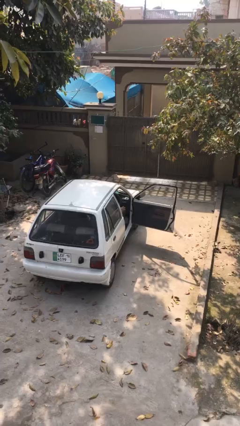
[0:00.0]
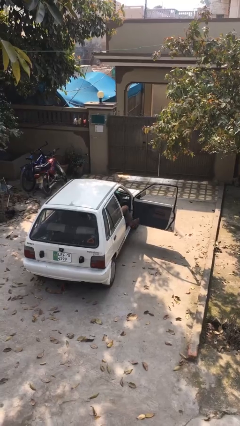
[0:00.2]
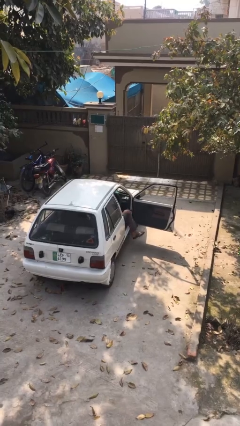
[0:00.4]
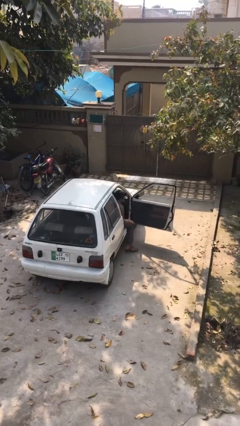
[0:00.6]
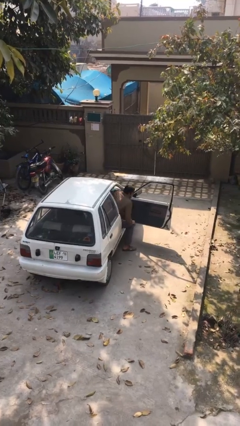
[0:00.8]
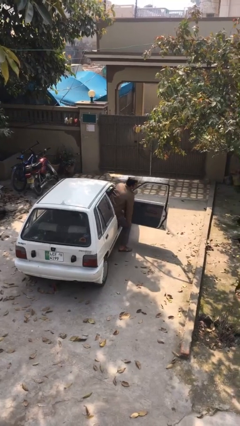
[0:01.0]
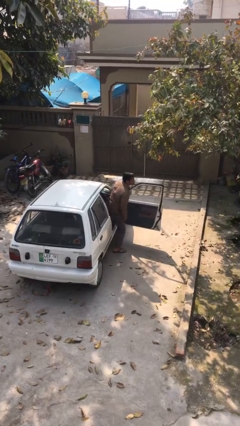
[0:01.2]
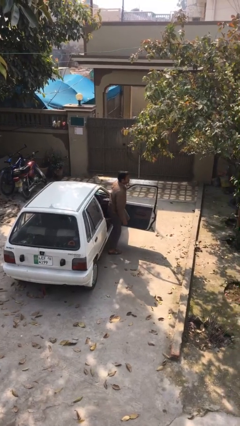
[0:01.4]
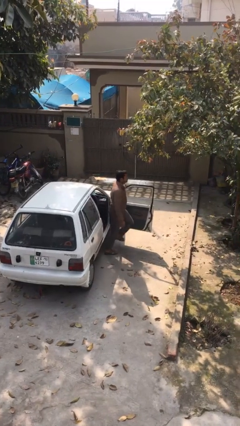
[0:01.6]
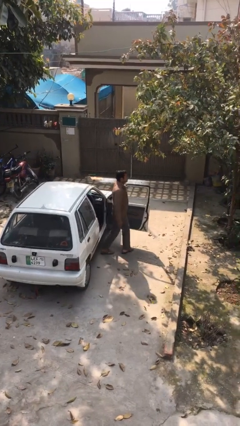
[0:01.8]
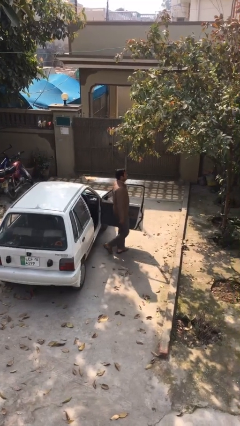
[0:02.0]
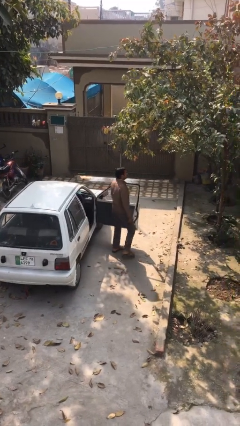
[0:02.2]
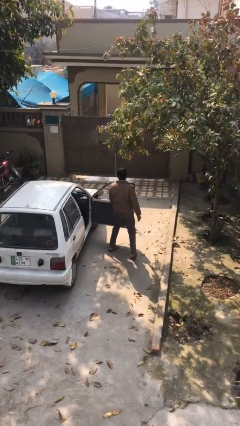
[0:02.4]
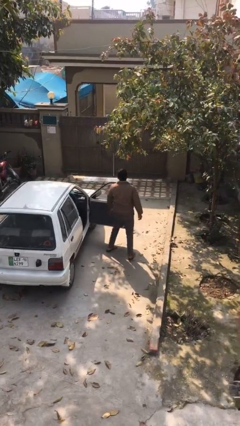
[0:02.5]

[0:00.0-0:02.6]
person exits car

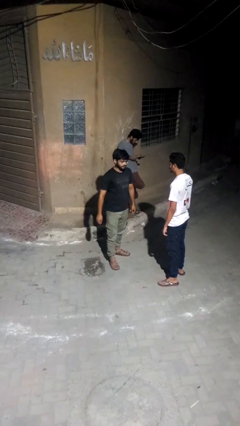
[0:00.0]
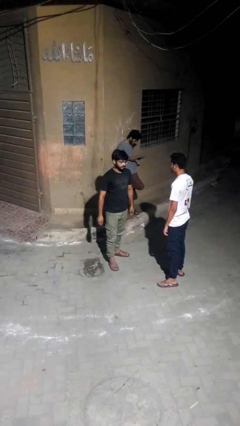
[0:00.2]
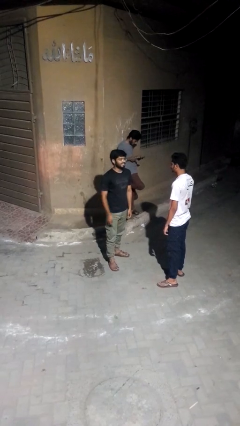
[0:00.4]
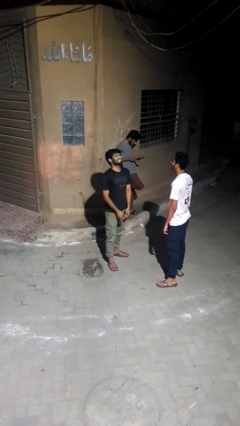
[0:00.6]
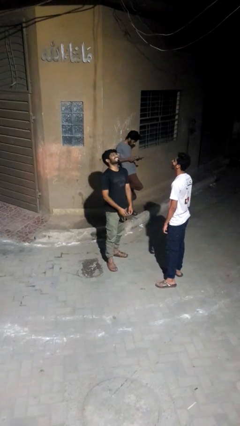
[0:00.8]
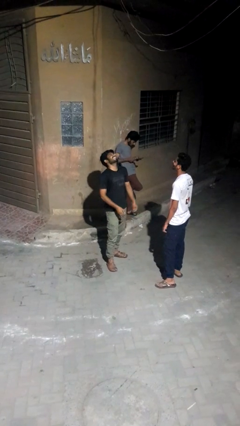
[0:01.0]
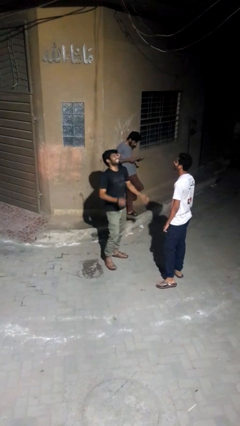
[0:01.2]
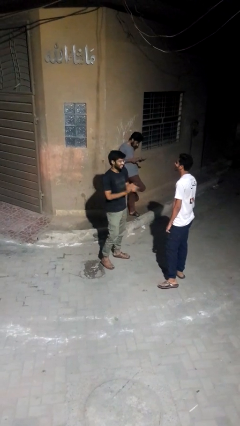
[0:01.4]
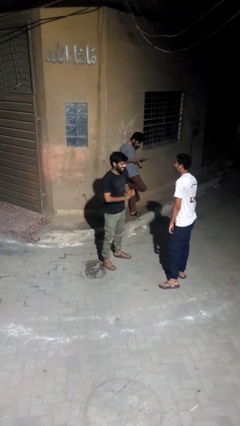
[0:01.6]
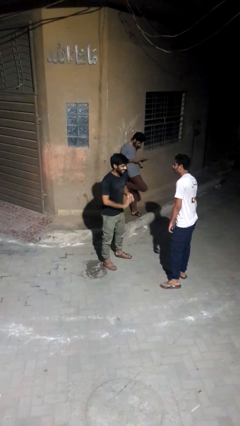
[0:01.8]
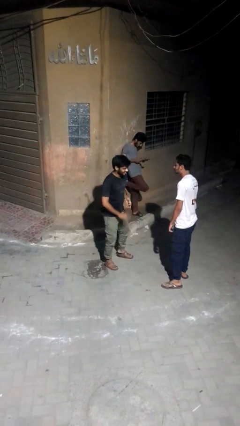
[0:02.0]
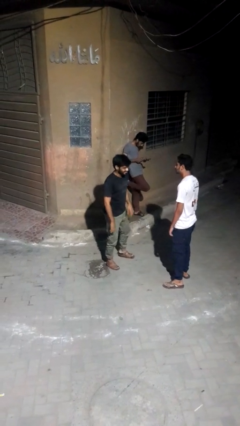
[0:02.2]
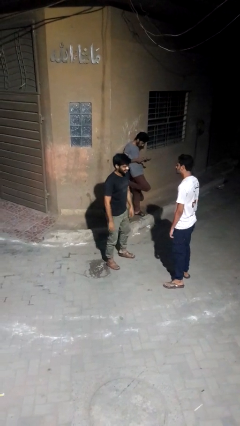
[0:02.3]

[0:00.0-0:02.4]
person laughs with person

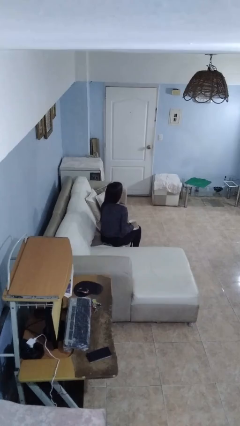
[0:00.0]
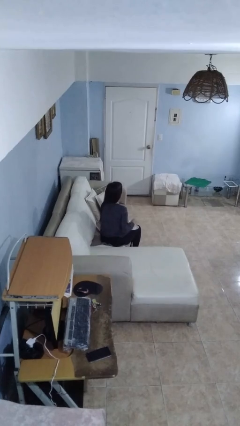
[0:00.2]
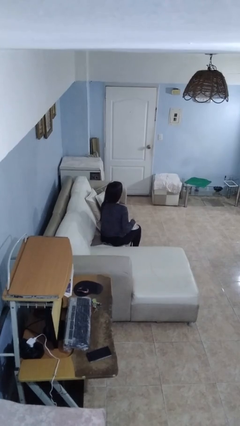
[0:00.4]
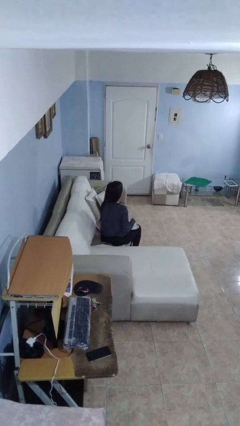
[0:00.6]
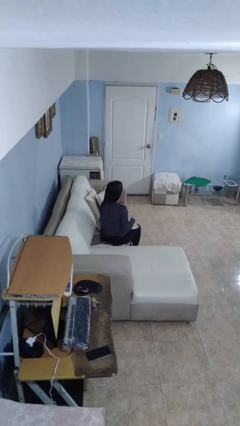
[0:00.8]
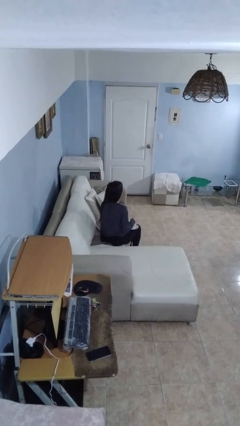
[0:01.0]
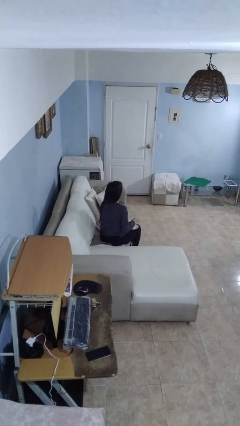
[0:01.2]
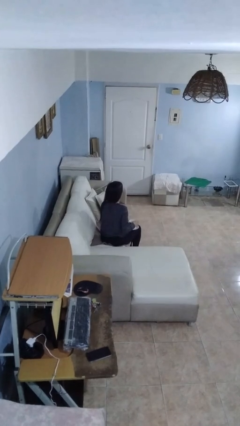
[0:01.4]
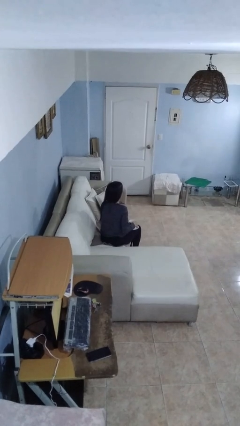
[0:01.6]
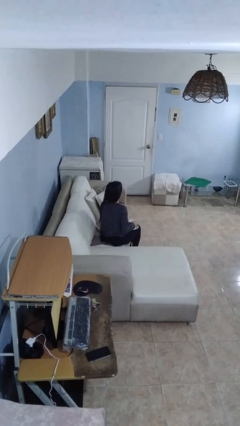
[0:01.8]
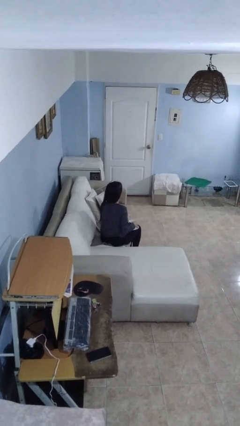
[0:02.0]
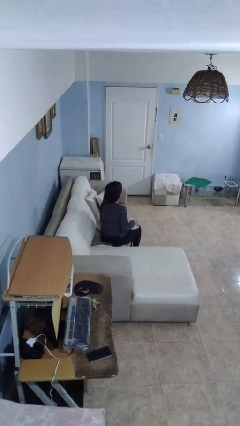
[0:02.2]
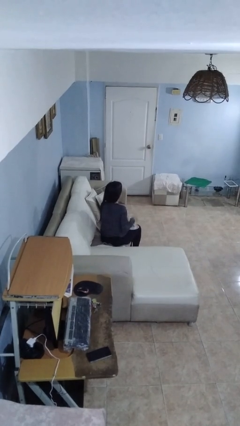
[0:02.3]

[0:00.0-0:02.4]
person stirs mug

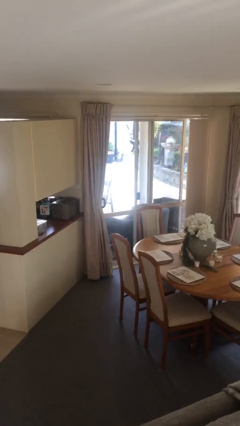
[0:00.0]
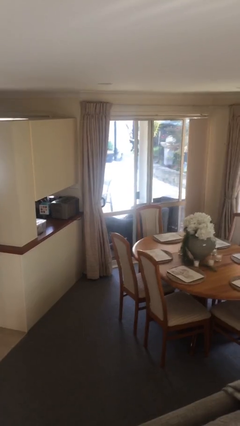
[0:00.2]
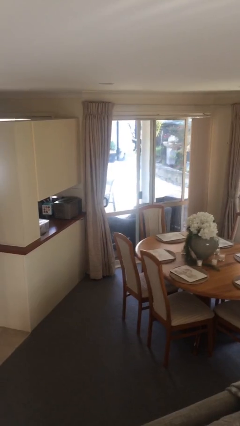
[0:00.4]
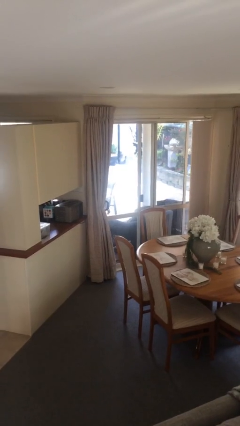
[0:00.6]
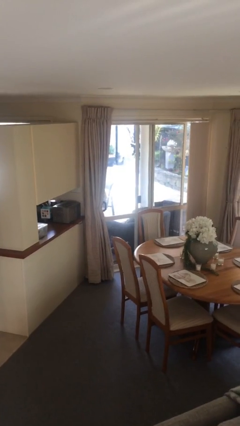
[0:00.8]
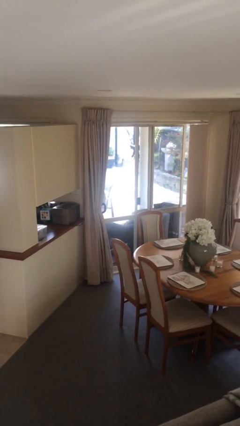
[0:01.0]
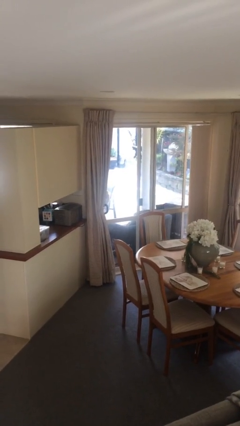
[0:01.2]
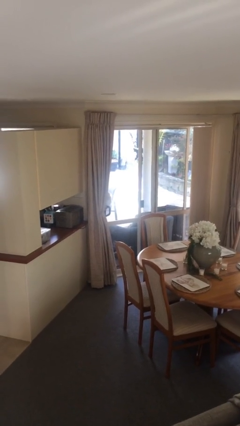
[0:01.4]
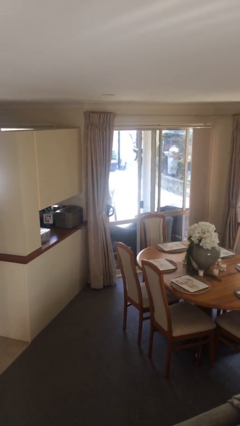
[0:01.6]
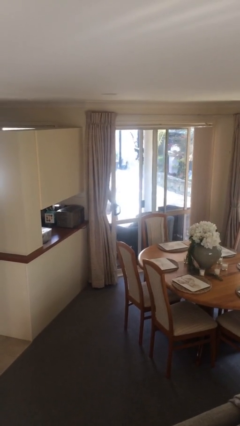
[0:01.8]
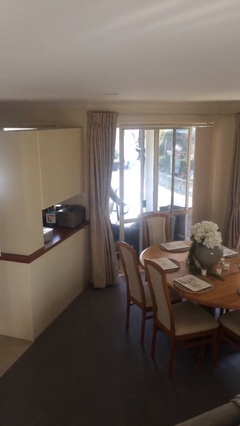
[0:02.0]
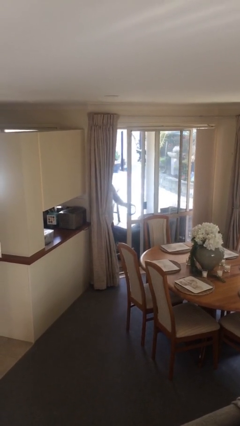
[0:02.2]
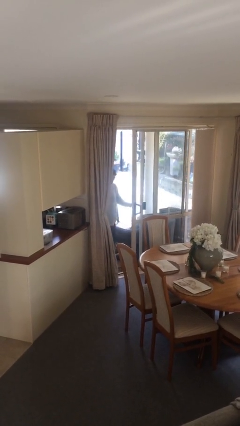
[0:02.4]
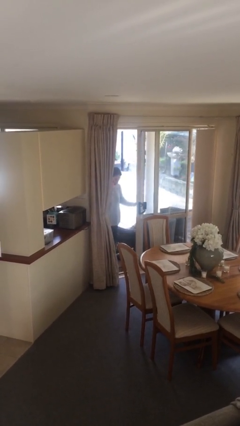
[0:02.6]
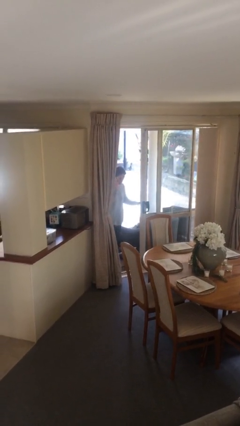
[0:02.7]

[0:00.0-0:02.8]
person opens facility door

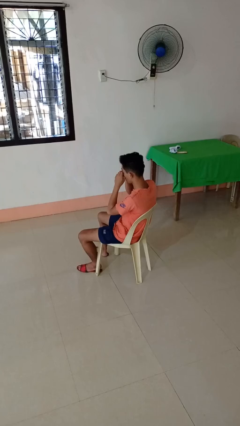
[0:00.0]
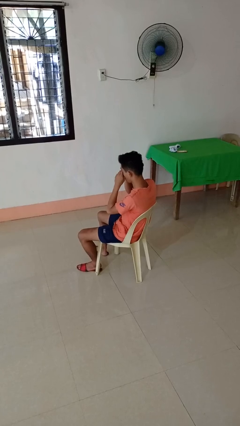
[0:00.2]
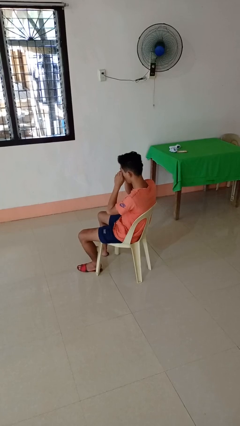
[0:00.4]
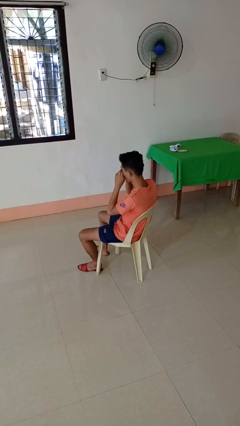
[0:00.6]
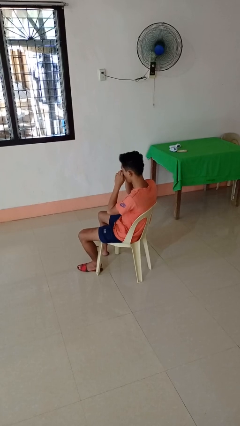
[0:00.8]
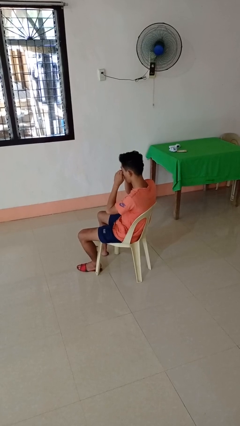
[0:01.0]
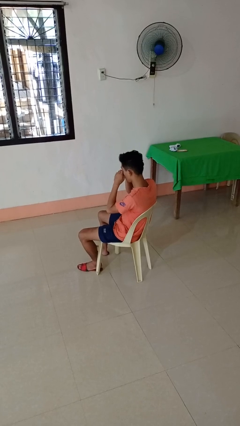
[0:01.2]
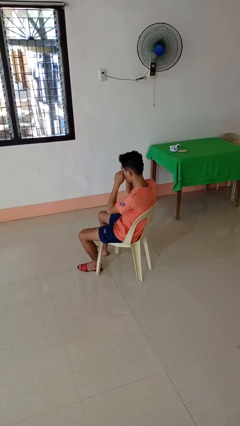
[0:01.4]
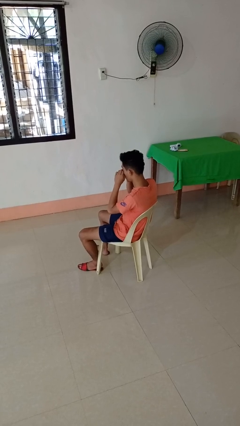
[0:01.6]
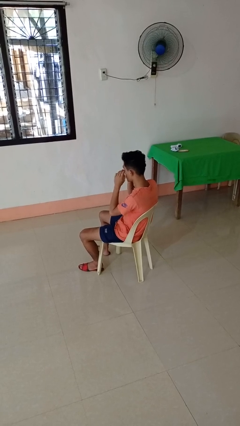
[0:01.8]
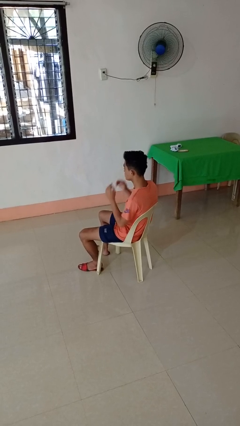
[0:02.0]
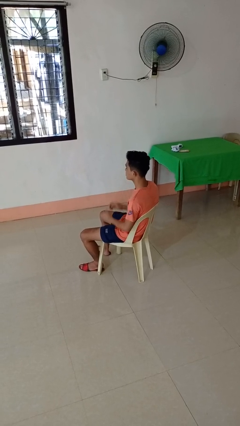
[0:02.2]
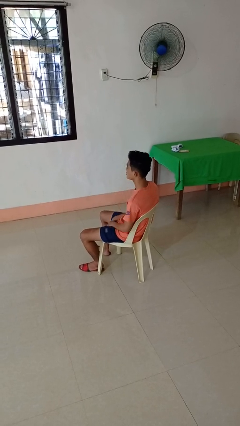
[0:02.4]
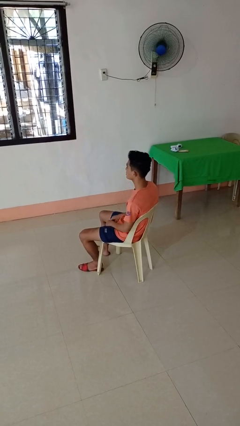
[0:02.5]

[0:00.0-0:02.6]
person rubs eyes

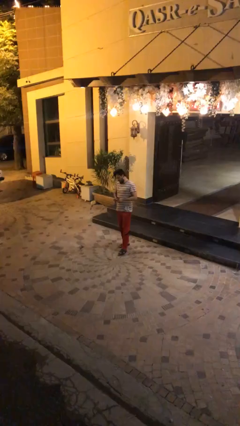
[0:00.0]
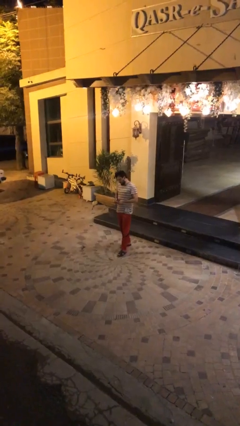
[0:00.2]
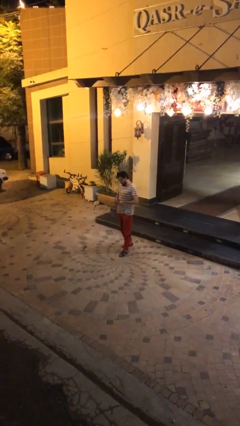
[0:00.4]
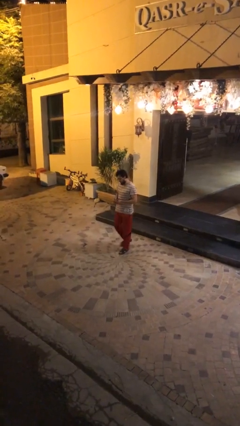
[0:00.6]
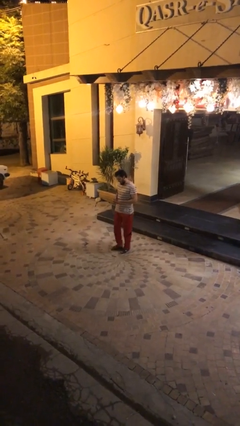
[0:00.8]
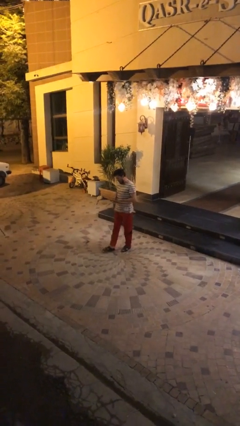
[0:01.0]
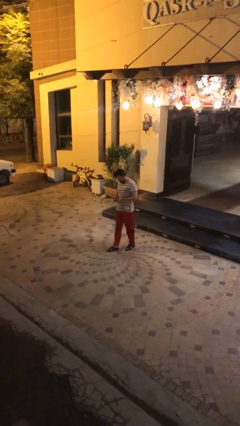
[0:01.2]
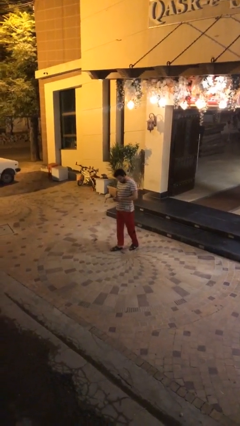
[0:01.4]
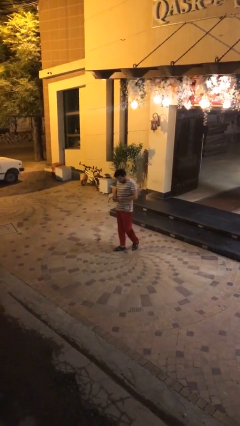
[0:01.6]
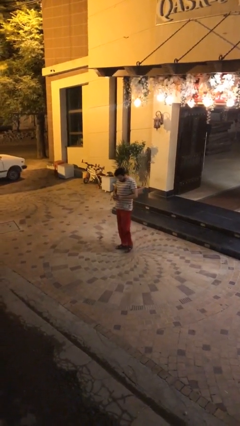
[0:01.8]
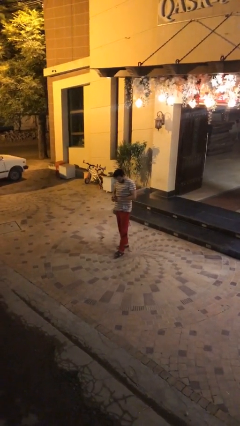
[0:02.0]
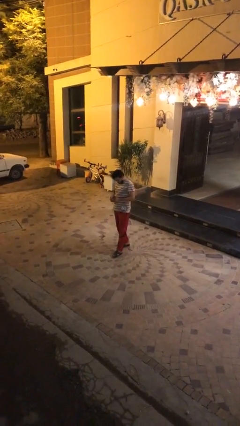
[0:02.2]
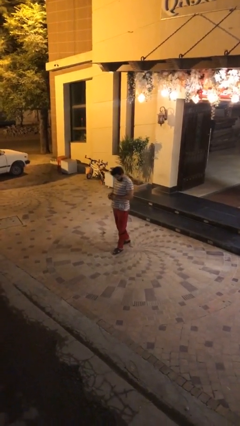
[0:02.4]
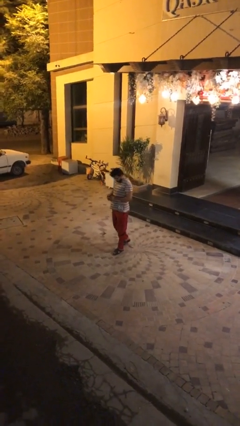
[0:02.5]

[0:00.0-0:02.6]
person texts on phone

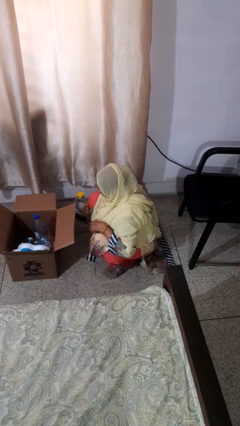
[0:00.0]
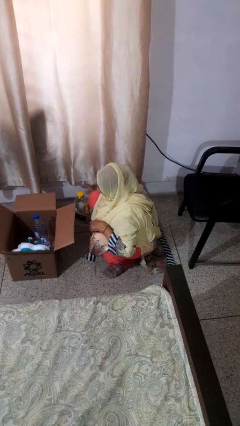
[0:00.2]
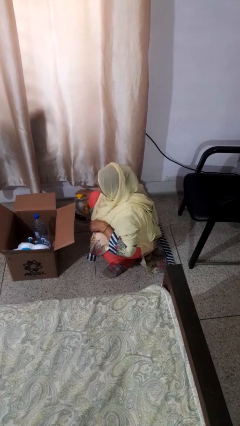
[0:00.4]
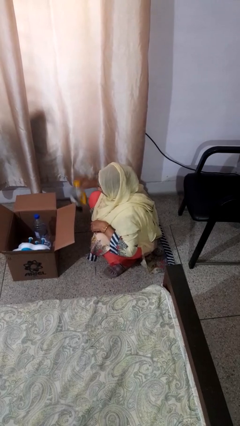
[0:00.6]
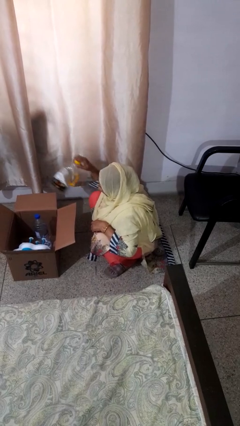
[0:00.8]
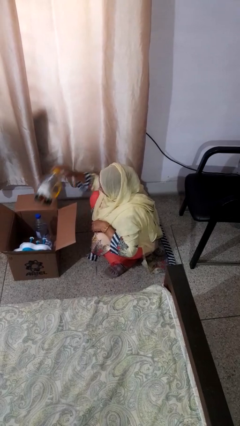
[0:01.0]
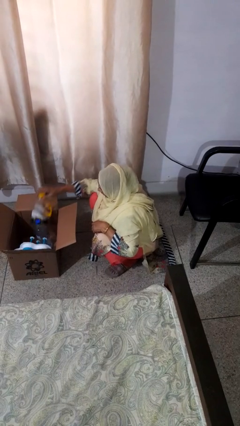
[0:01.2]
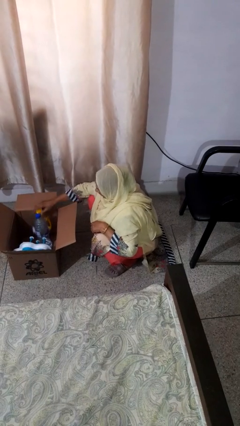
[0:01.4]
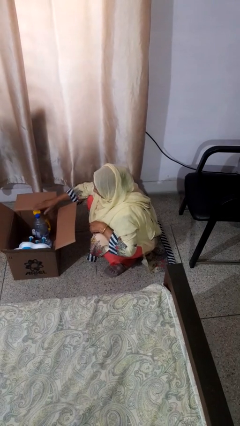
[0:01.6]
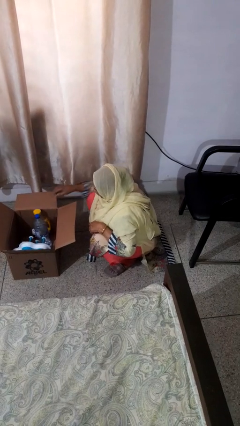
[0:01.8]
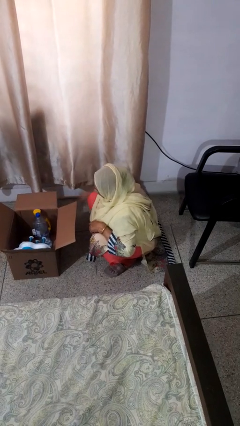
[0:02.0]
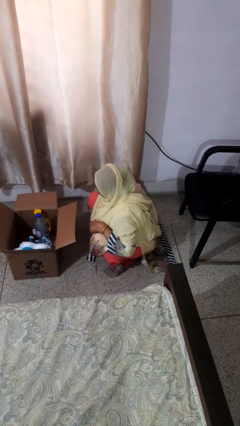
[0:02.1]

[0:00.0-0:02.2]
person puts object into box
